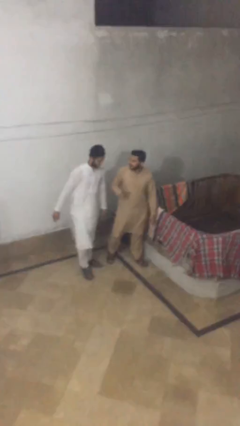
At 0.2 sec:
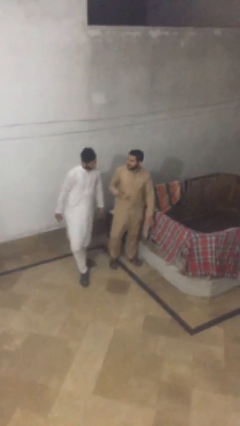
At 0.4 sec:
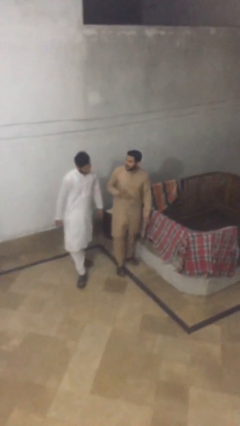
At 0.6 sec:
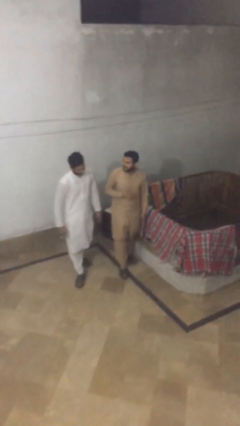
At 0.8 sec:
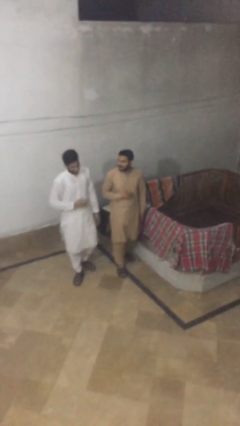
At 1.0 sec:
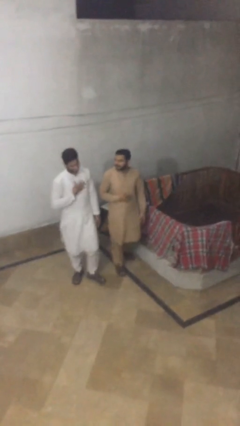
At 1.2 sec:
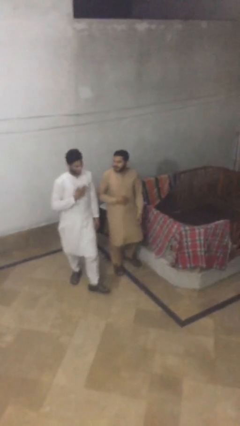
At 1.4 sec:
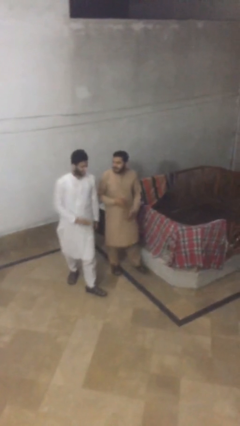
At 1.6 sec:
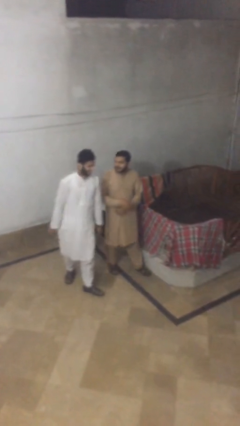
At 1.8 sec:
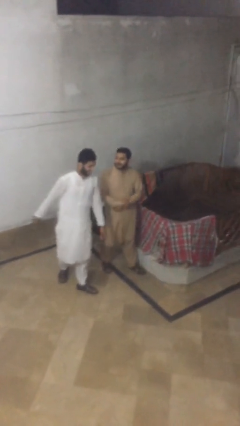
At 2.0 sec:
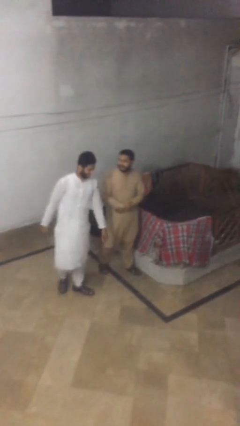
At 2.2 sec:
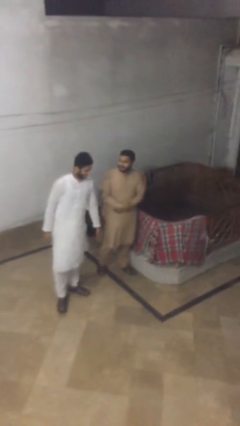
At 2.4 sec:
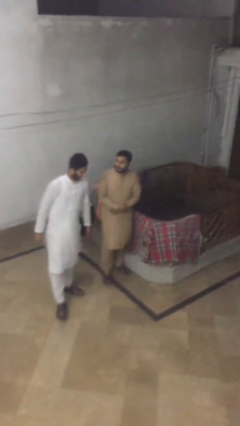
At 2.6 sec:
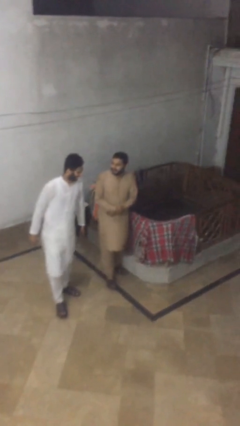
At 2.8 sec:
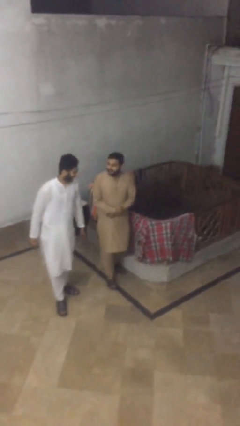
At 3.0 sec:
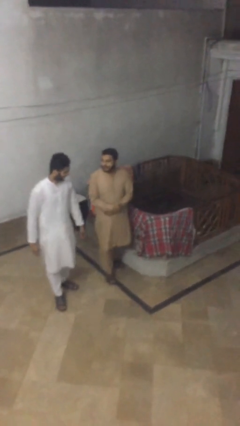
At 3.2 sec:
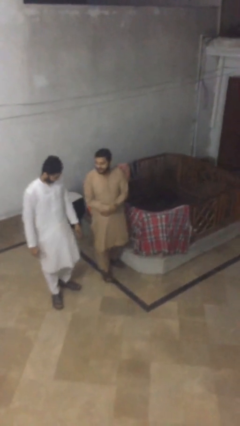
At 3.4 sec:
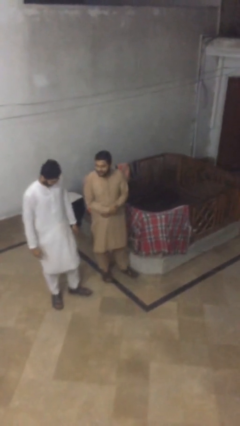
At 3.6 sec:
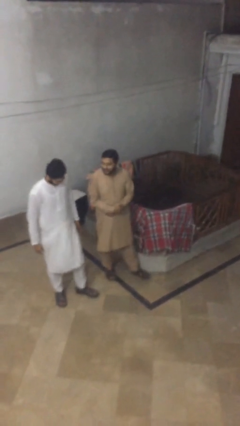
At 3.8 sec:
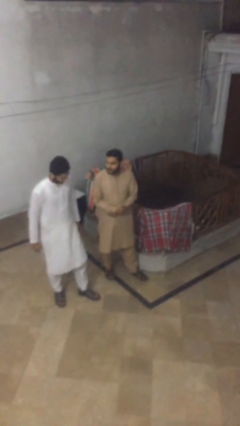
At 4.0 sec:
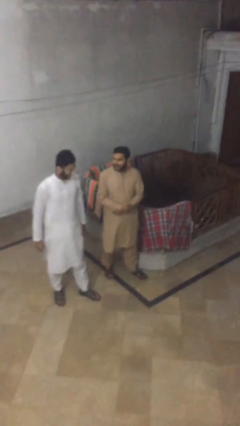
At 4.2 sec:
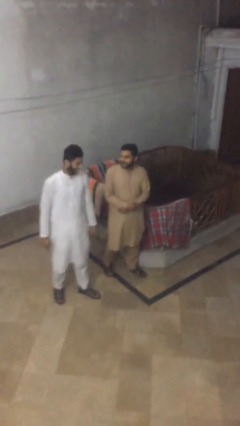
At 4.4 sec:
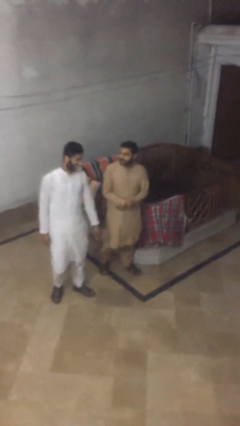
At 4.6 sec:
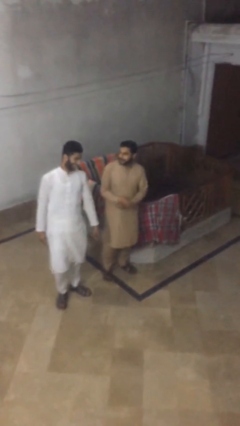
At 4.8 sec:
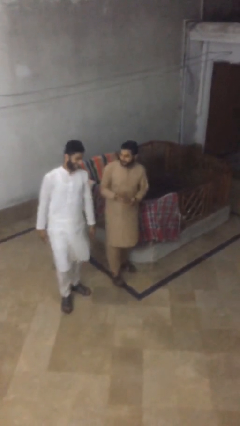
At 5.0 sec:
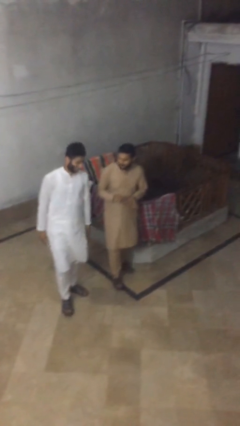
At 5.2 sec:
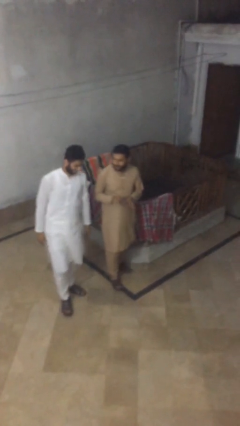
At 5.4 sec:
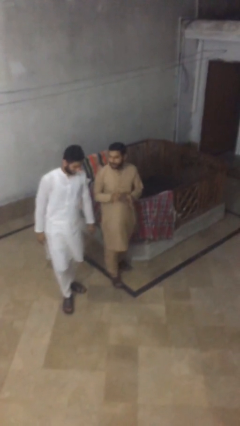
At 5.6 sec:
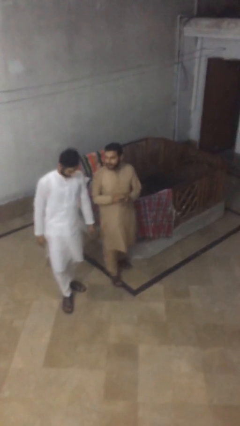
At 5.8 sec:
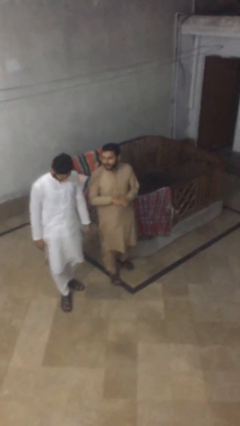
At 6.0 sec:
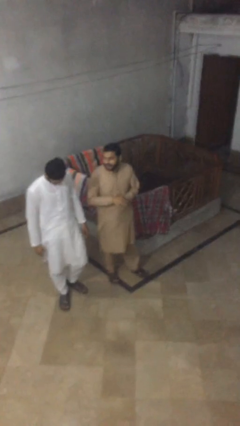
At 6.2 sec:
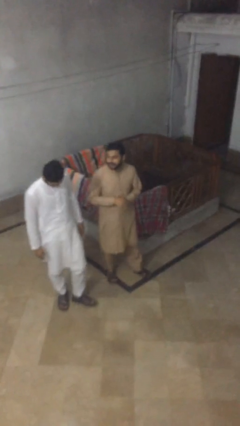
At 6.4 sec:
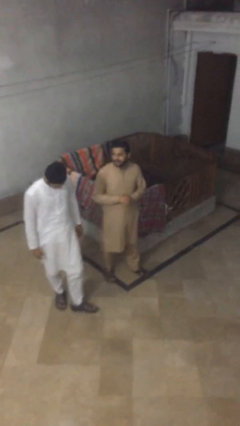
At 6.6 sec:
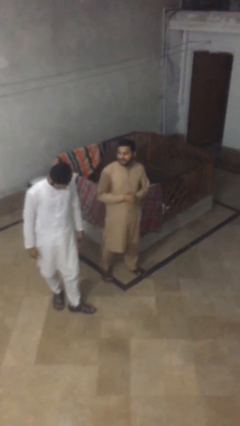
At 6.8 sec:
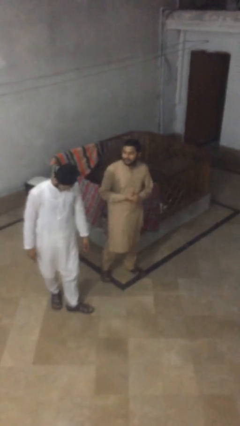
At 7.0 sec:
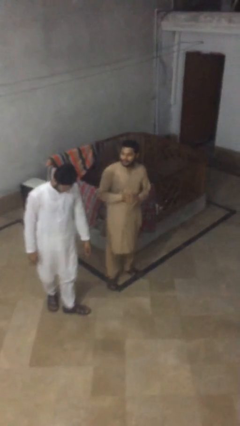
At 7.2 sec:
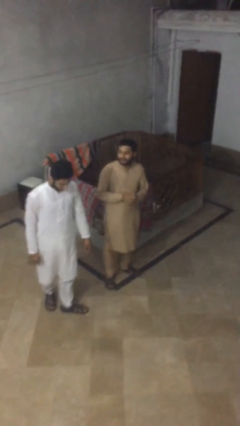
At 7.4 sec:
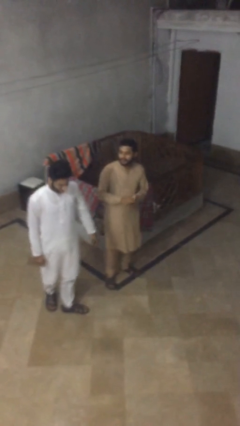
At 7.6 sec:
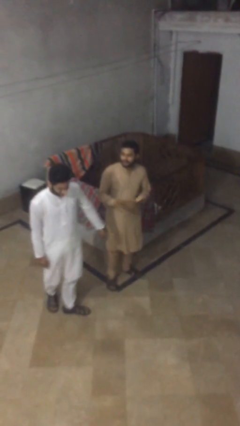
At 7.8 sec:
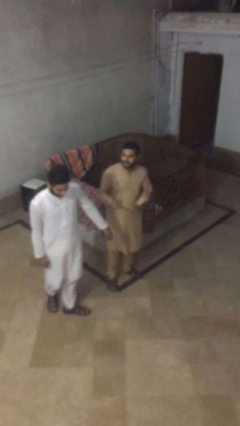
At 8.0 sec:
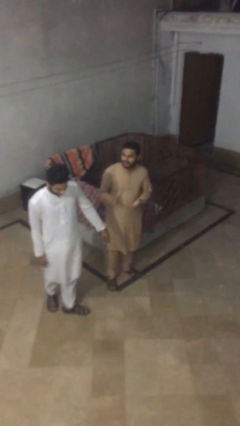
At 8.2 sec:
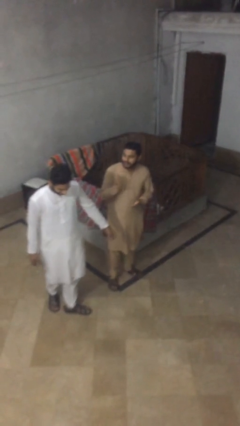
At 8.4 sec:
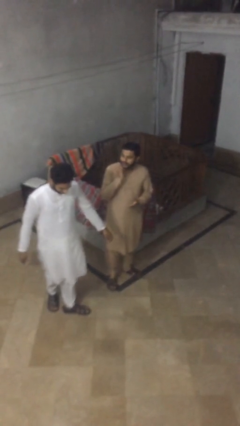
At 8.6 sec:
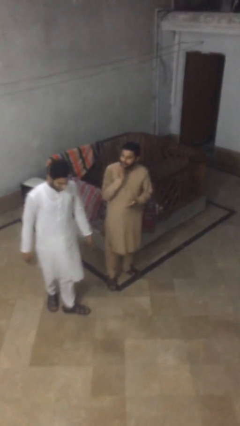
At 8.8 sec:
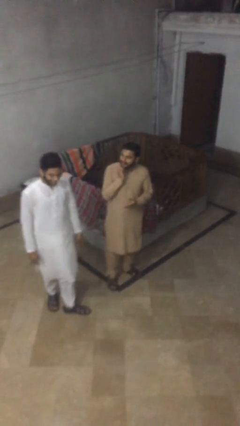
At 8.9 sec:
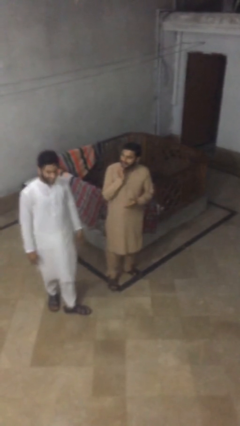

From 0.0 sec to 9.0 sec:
person talks to person

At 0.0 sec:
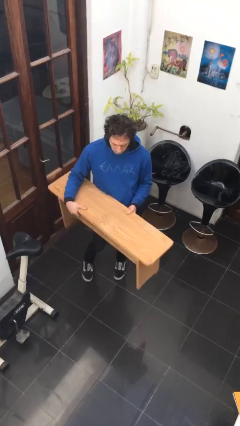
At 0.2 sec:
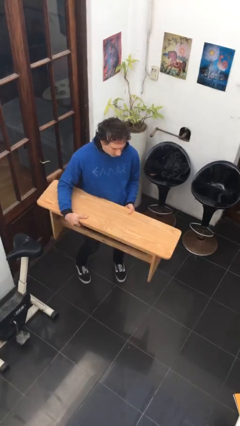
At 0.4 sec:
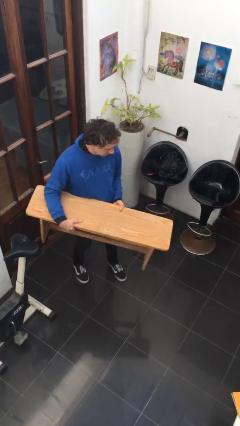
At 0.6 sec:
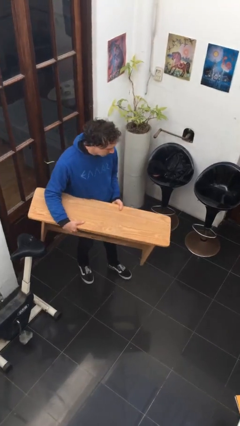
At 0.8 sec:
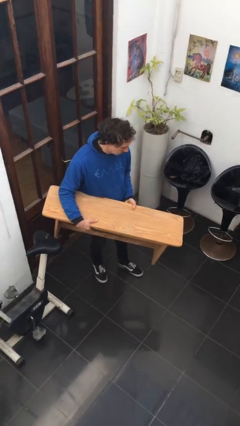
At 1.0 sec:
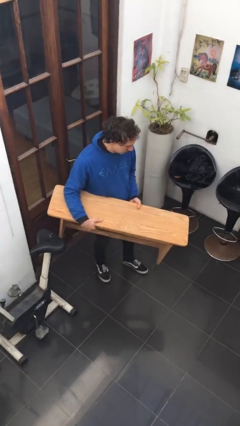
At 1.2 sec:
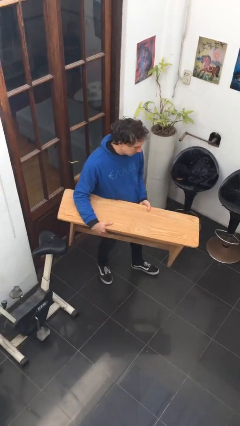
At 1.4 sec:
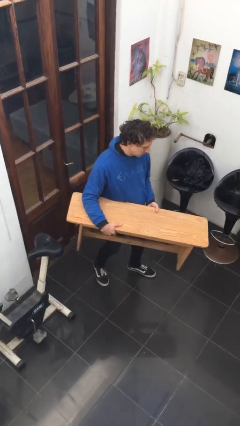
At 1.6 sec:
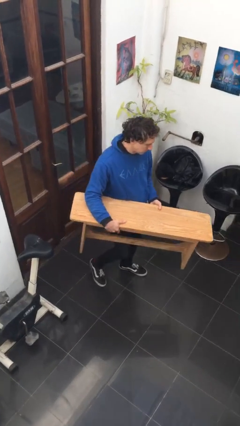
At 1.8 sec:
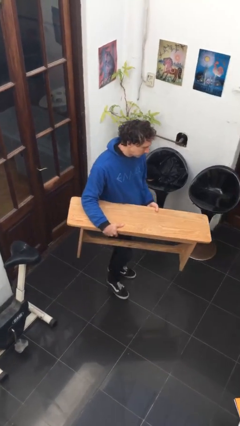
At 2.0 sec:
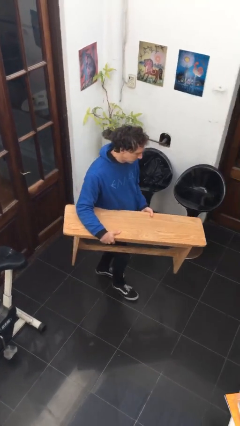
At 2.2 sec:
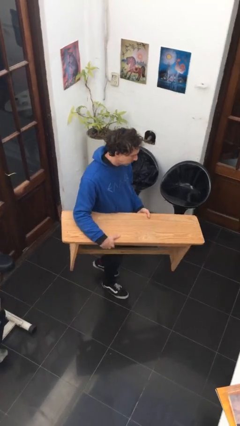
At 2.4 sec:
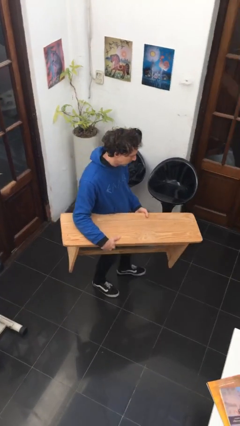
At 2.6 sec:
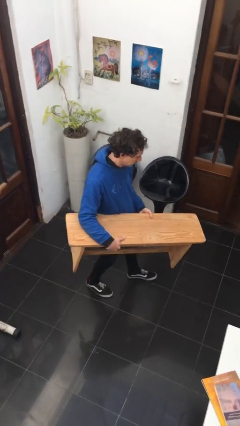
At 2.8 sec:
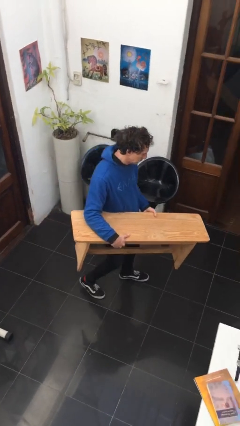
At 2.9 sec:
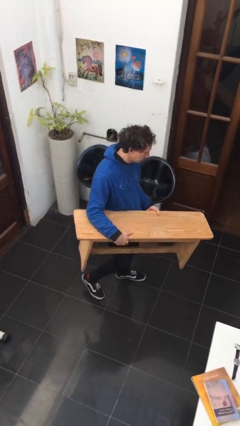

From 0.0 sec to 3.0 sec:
person carries furniture

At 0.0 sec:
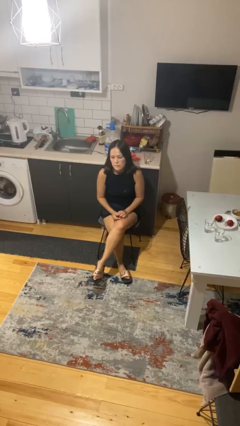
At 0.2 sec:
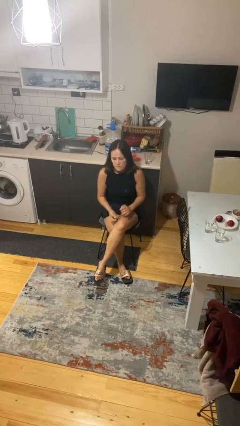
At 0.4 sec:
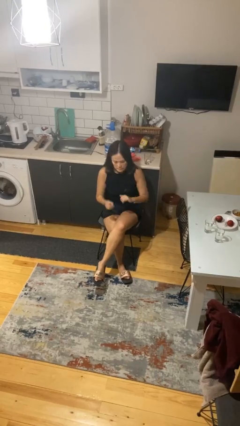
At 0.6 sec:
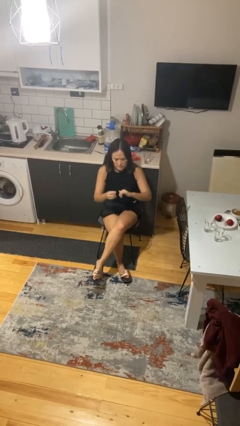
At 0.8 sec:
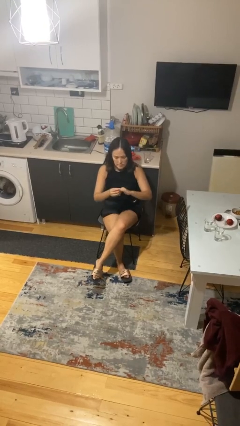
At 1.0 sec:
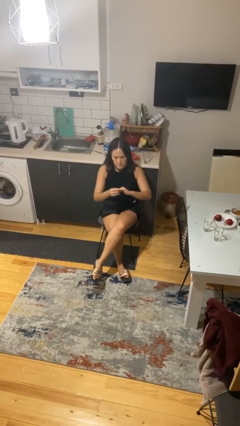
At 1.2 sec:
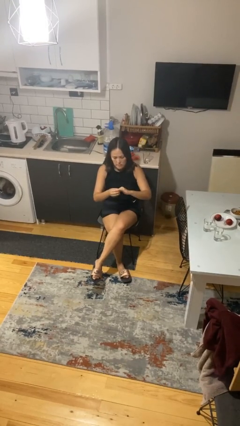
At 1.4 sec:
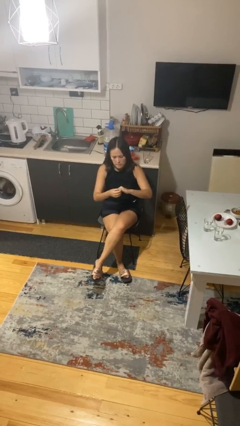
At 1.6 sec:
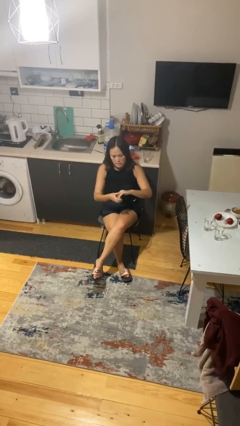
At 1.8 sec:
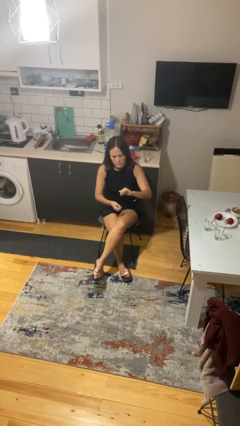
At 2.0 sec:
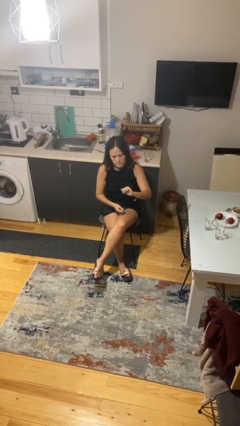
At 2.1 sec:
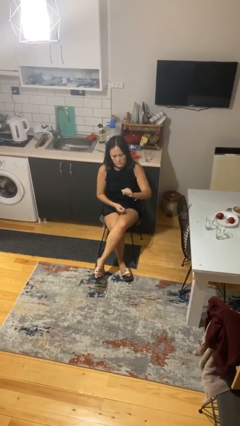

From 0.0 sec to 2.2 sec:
person puts on ring

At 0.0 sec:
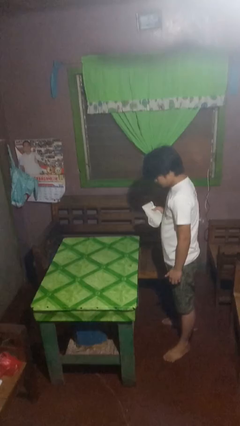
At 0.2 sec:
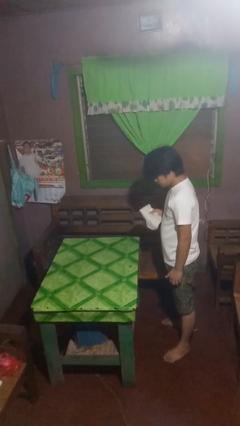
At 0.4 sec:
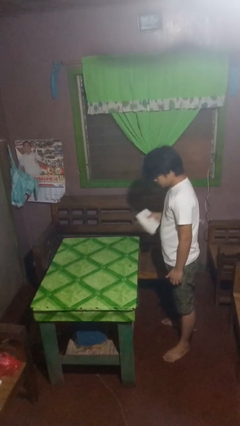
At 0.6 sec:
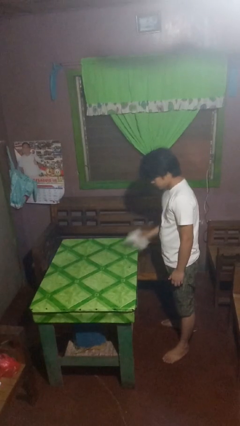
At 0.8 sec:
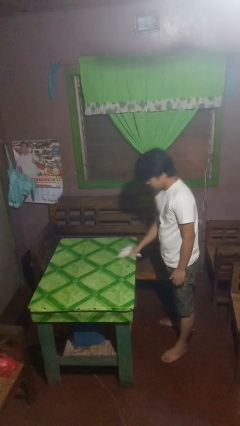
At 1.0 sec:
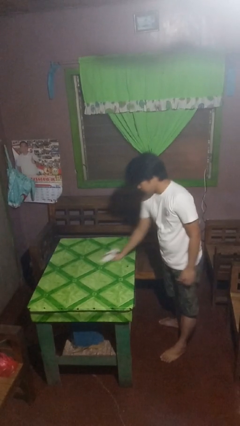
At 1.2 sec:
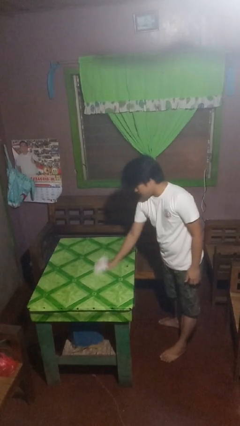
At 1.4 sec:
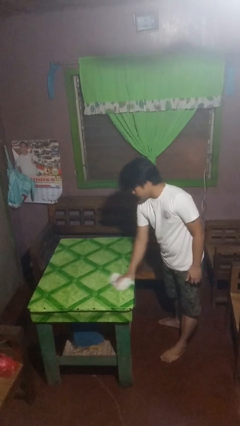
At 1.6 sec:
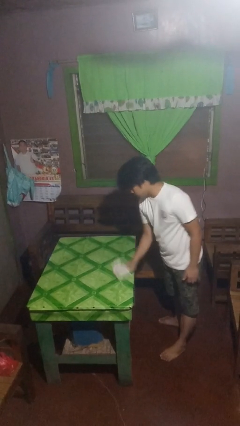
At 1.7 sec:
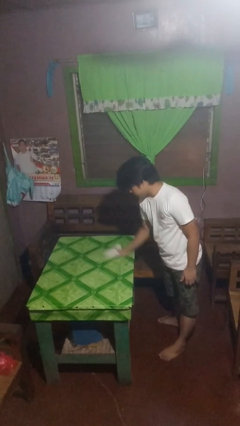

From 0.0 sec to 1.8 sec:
person cleans table with rag

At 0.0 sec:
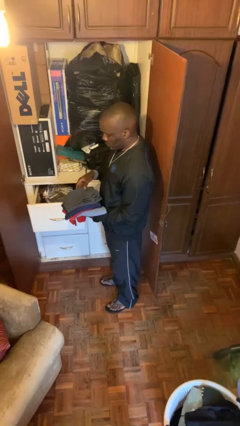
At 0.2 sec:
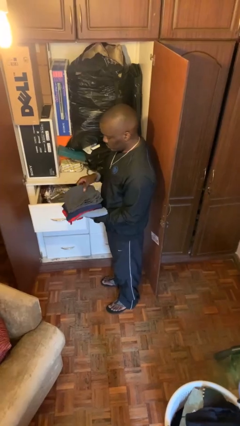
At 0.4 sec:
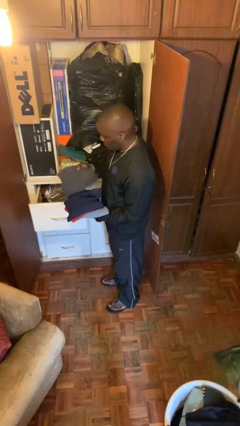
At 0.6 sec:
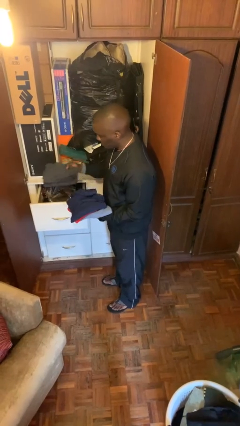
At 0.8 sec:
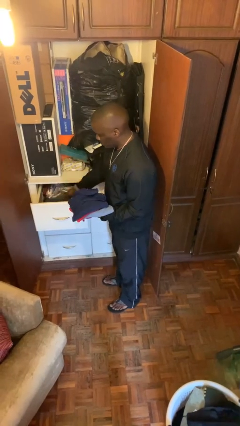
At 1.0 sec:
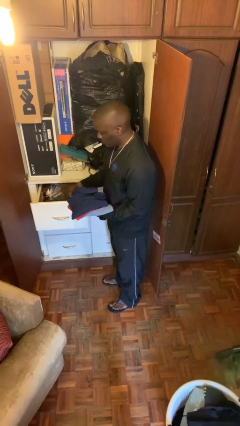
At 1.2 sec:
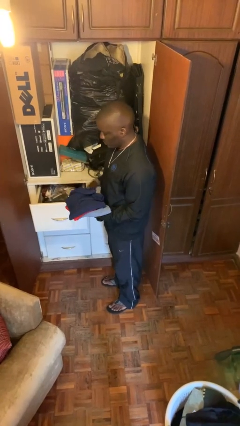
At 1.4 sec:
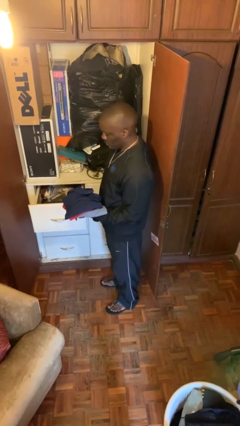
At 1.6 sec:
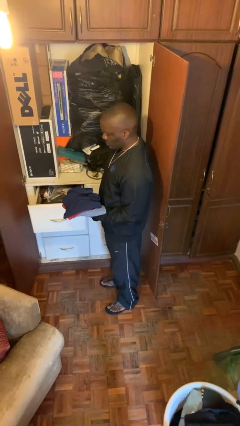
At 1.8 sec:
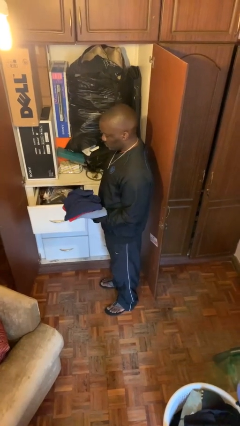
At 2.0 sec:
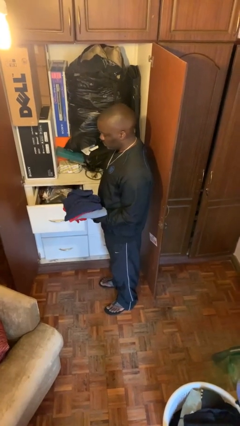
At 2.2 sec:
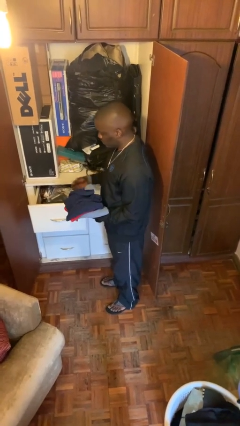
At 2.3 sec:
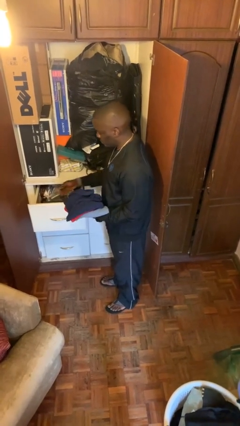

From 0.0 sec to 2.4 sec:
person puts clothes into dresser
